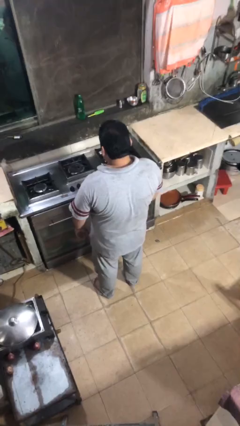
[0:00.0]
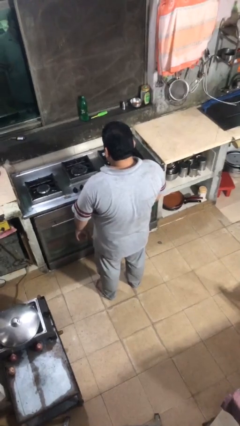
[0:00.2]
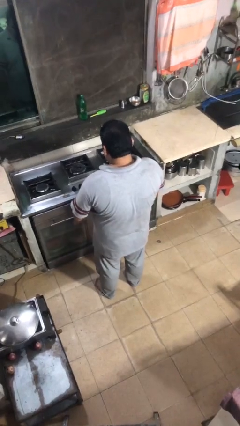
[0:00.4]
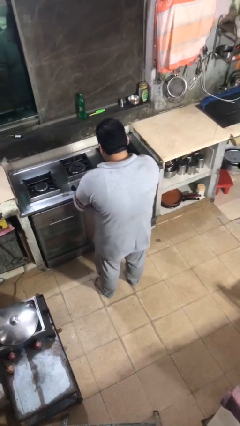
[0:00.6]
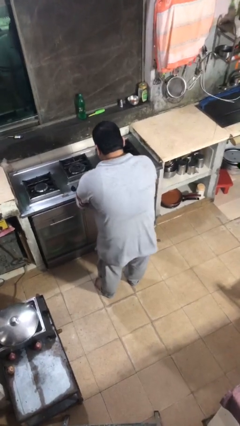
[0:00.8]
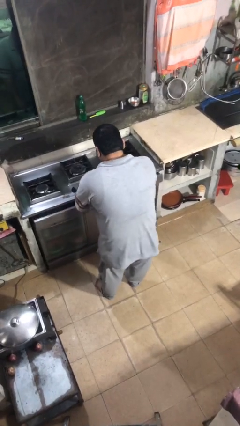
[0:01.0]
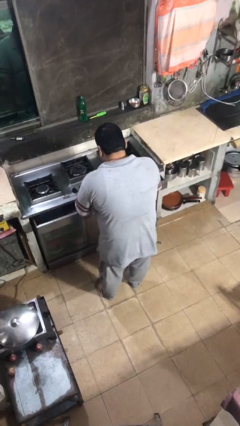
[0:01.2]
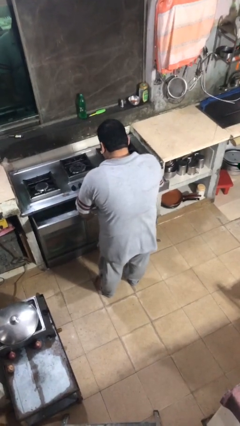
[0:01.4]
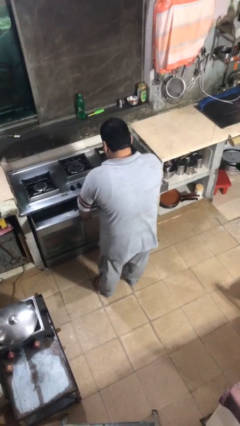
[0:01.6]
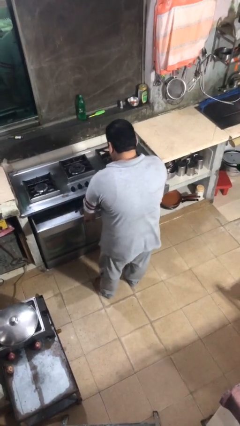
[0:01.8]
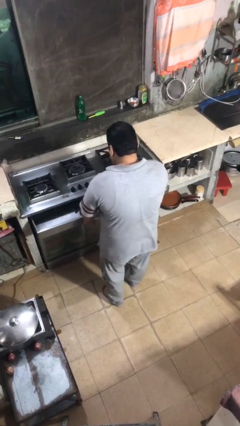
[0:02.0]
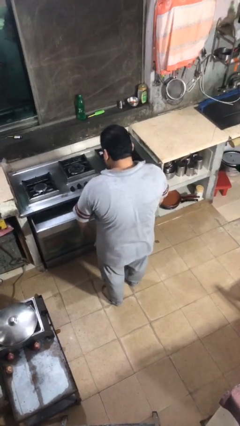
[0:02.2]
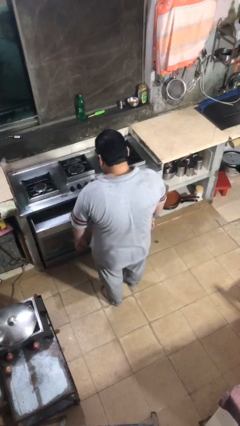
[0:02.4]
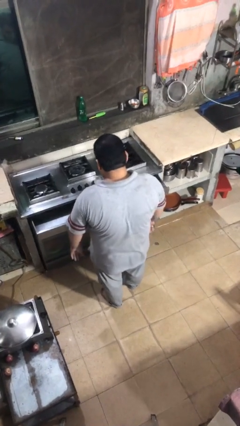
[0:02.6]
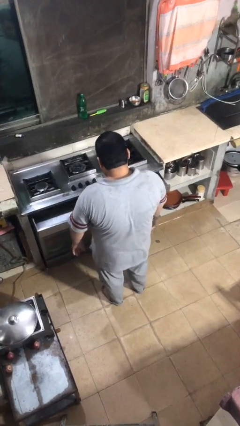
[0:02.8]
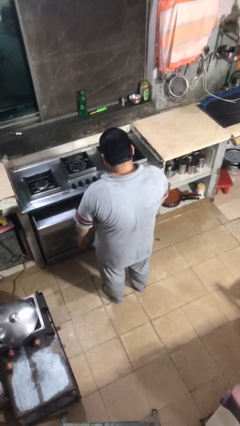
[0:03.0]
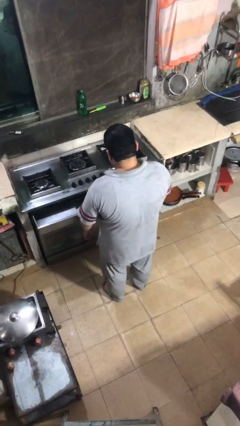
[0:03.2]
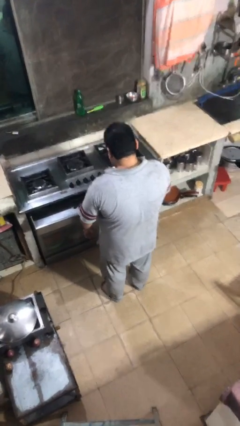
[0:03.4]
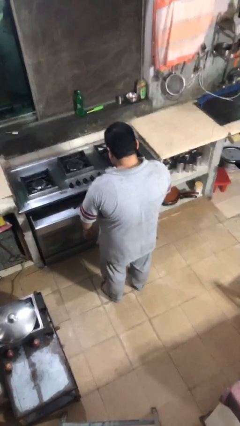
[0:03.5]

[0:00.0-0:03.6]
person opens kitchen drawer

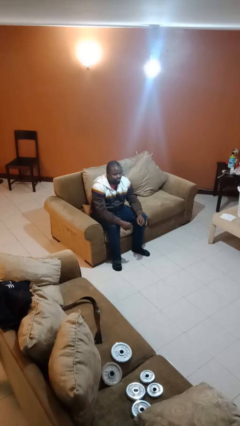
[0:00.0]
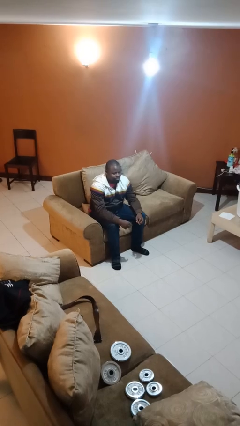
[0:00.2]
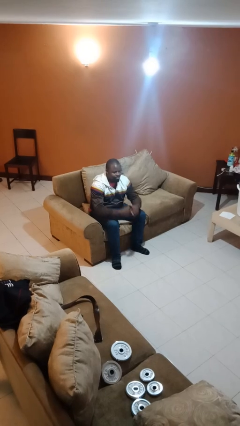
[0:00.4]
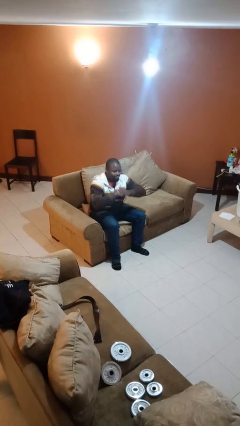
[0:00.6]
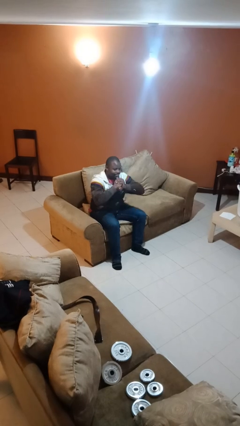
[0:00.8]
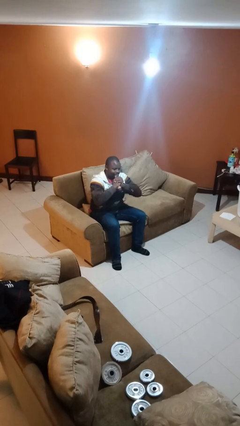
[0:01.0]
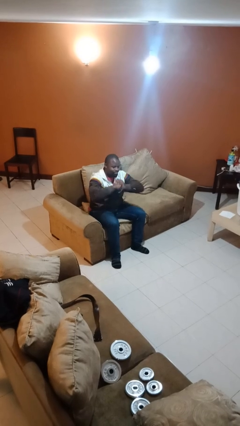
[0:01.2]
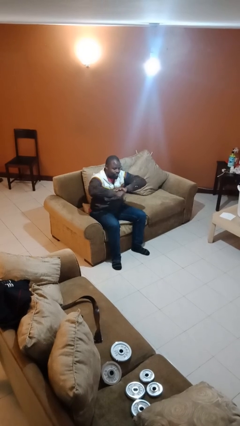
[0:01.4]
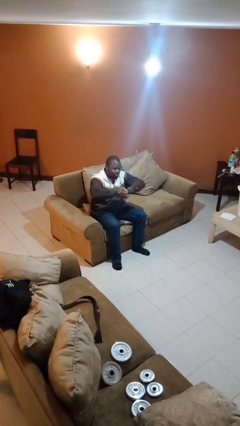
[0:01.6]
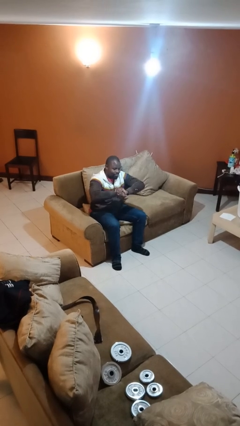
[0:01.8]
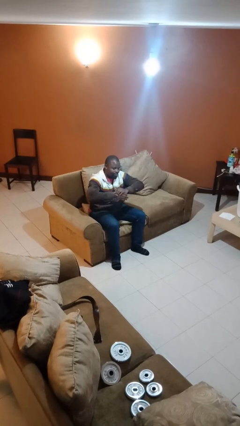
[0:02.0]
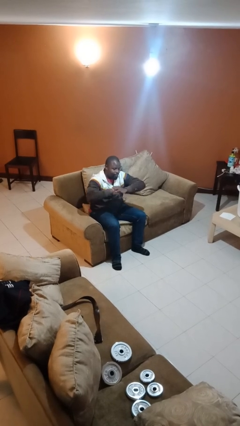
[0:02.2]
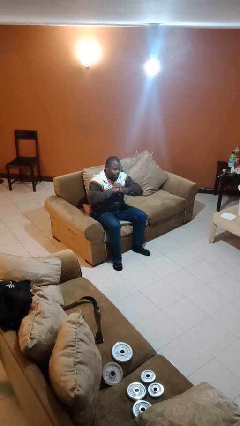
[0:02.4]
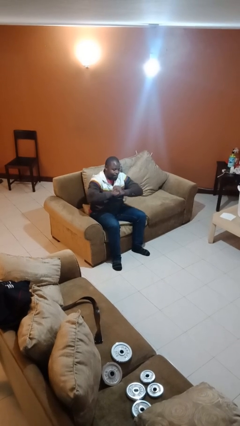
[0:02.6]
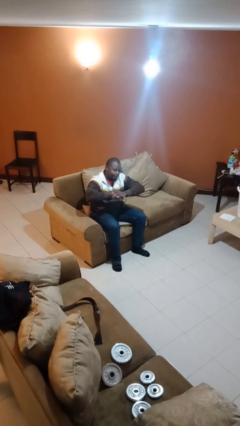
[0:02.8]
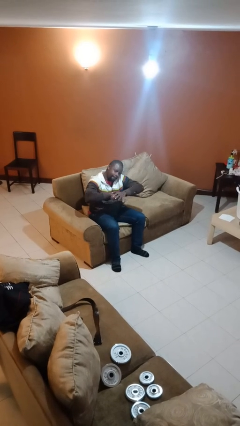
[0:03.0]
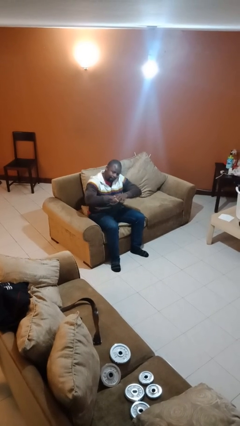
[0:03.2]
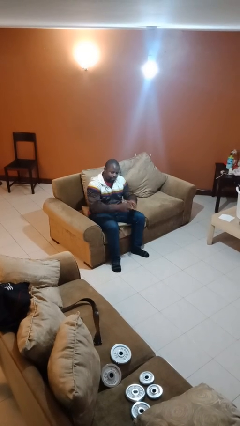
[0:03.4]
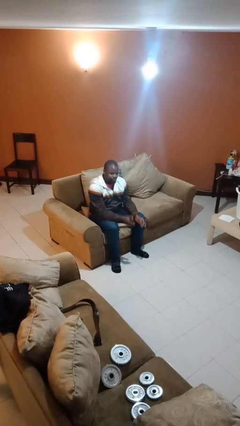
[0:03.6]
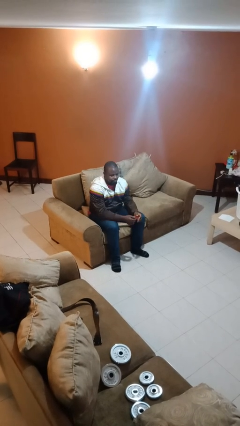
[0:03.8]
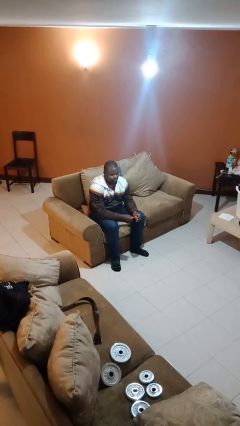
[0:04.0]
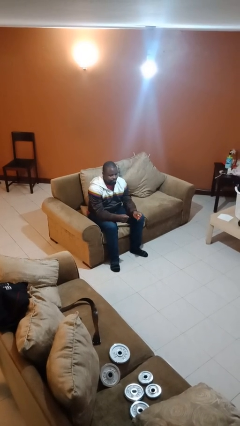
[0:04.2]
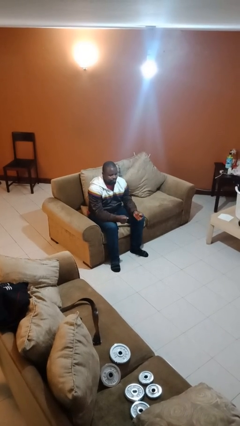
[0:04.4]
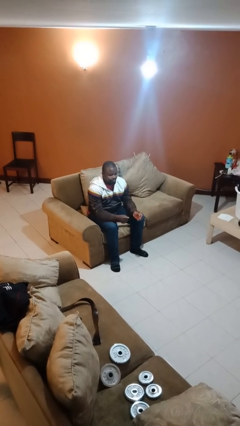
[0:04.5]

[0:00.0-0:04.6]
person cracks knuckles

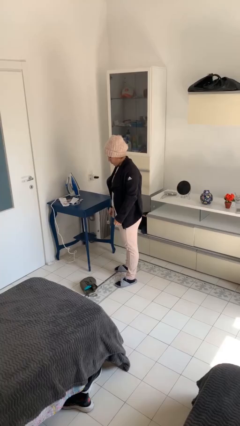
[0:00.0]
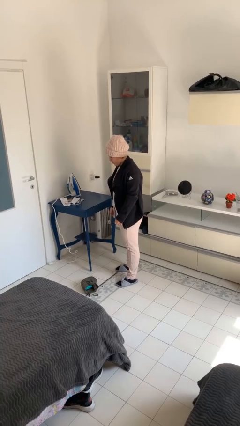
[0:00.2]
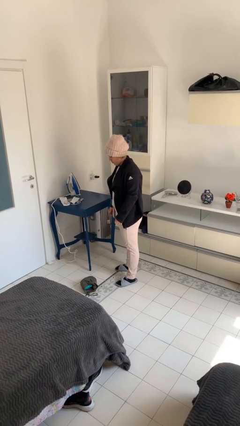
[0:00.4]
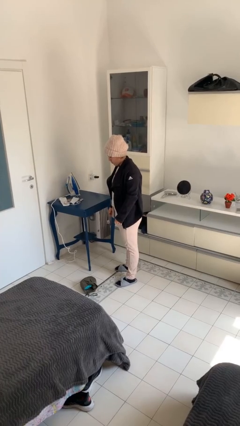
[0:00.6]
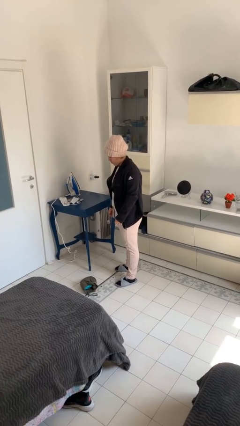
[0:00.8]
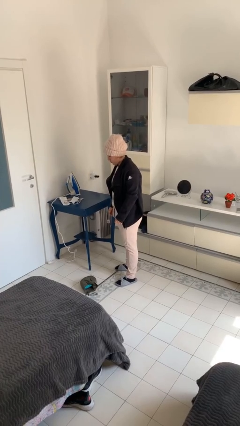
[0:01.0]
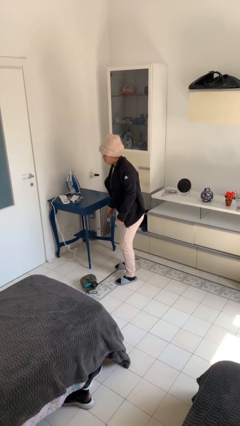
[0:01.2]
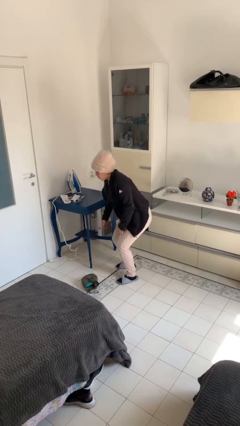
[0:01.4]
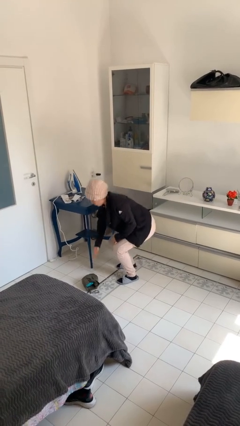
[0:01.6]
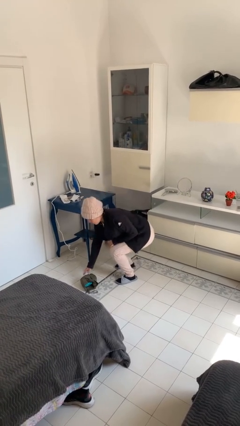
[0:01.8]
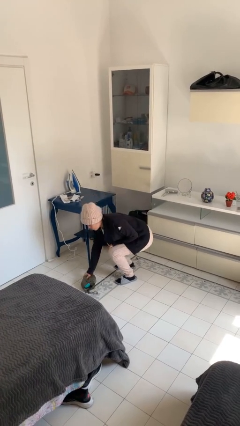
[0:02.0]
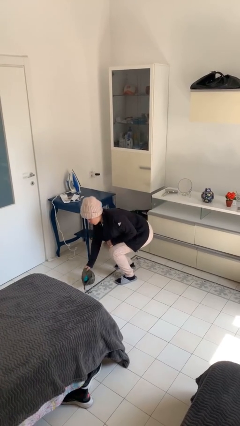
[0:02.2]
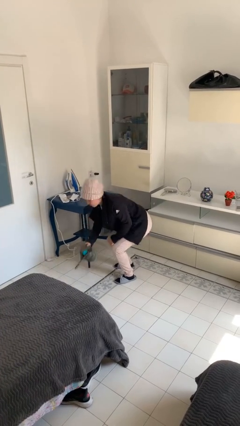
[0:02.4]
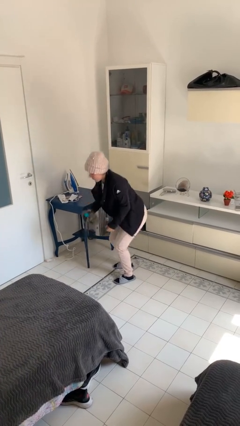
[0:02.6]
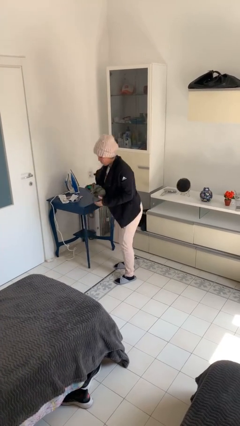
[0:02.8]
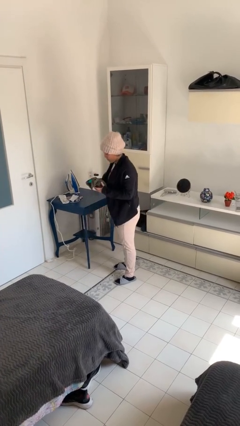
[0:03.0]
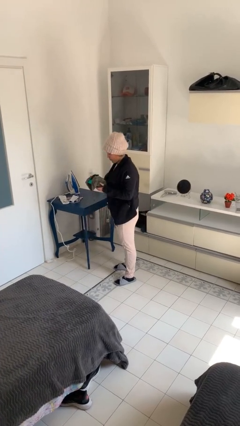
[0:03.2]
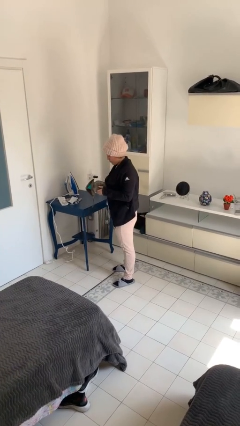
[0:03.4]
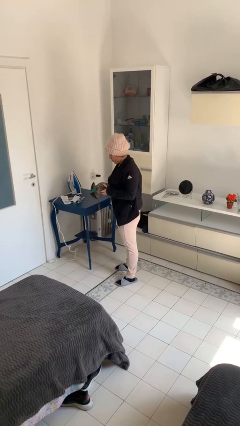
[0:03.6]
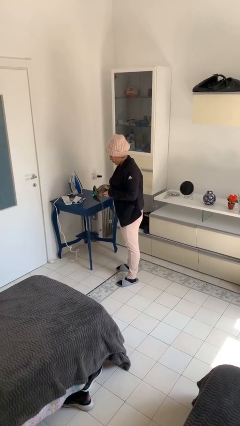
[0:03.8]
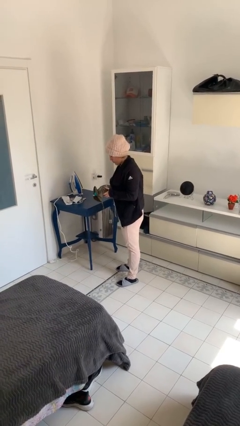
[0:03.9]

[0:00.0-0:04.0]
person picks up object from floor

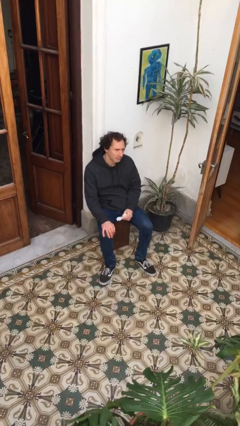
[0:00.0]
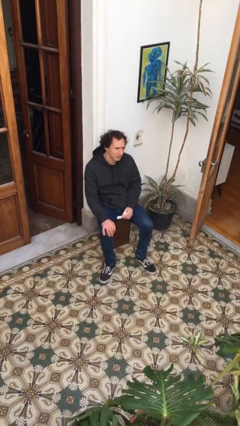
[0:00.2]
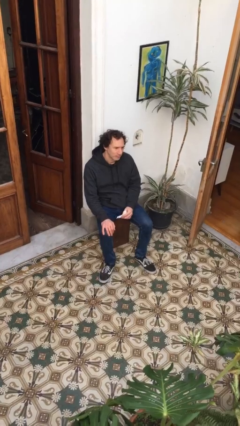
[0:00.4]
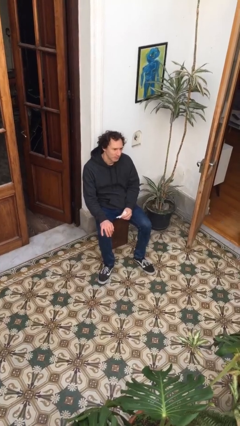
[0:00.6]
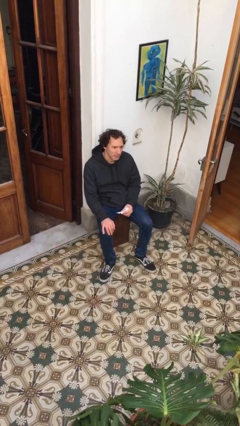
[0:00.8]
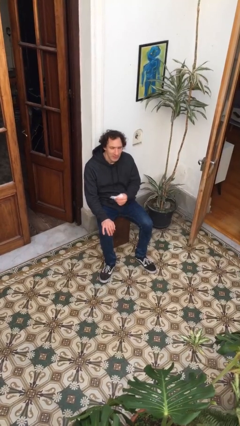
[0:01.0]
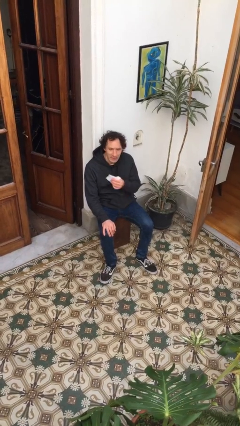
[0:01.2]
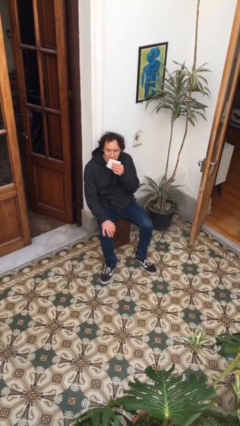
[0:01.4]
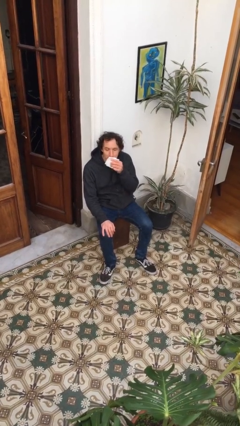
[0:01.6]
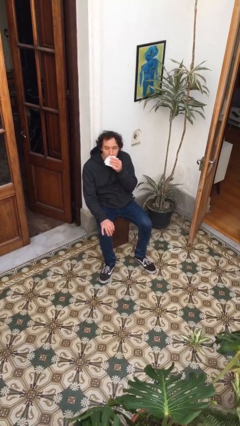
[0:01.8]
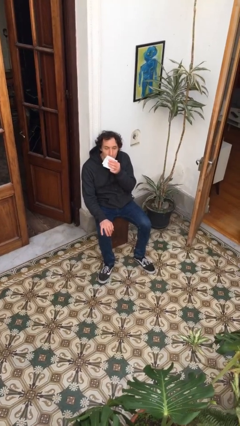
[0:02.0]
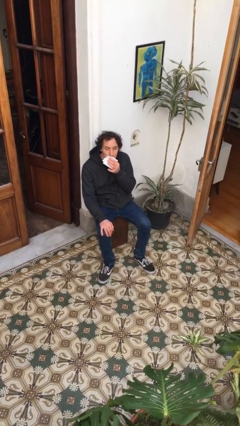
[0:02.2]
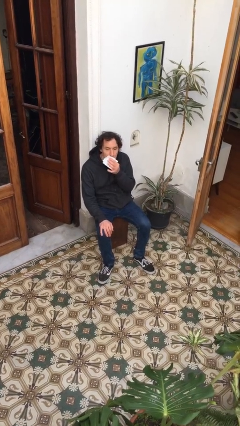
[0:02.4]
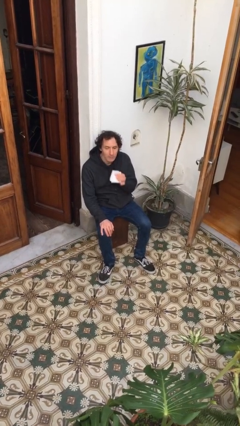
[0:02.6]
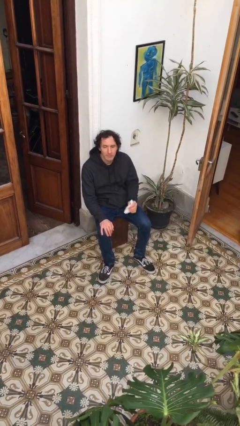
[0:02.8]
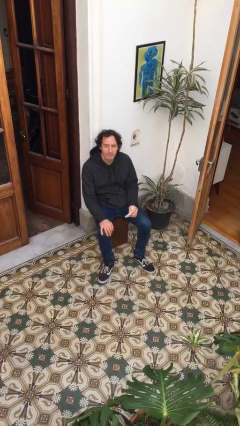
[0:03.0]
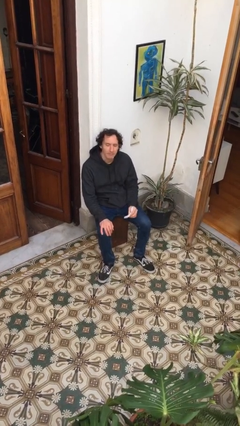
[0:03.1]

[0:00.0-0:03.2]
person wipes mouth with napkin

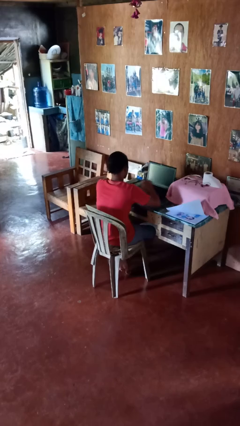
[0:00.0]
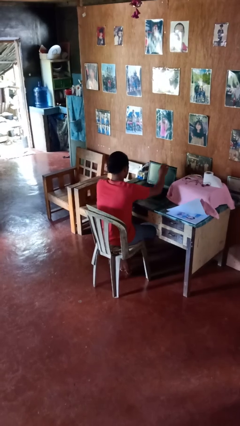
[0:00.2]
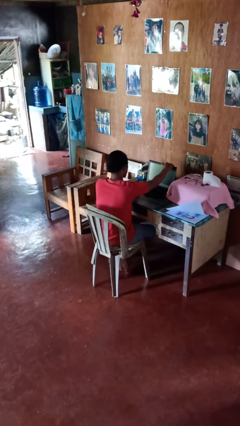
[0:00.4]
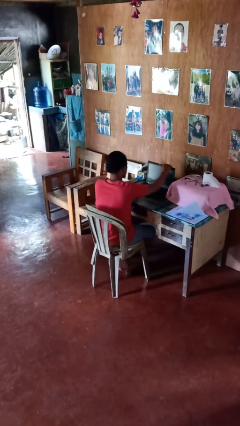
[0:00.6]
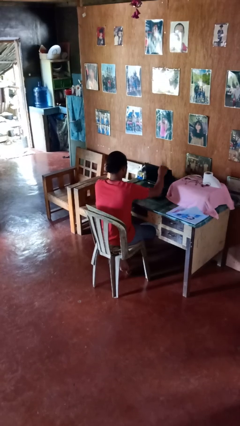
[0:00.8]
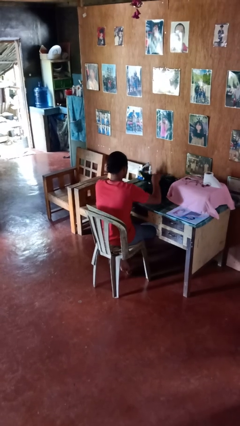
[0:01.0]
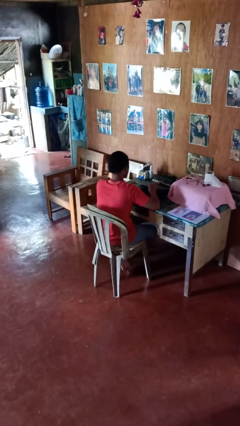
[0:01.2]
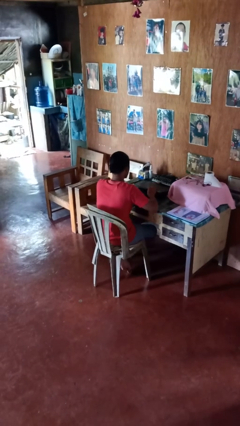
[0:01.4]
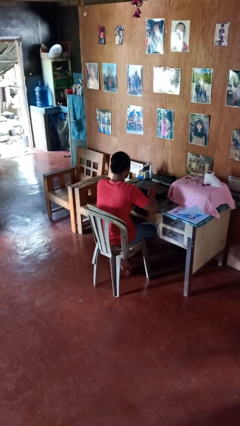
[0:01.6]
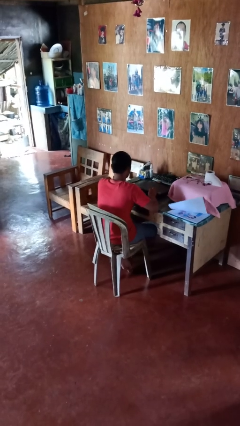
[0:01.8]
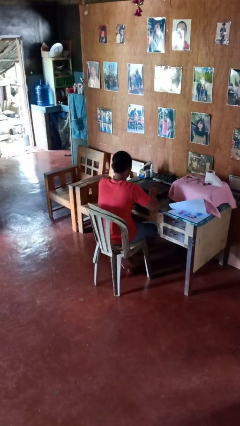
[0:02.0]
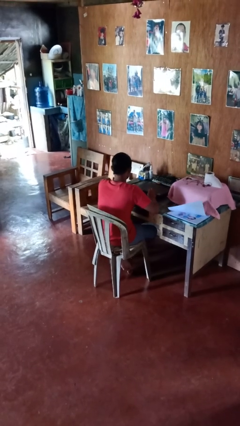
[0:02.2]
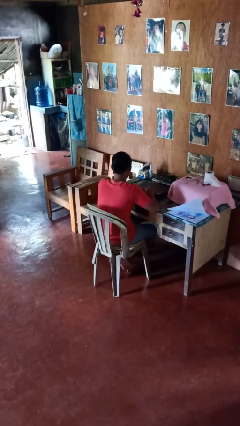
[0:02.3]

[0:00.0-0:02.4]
person closes laptop
